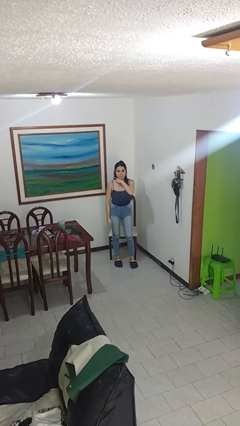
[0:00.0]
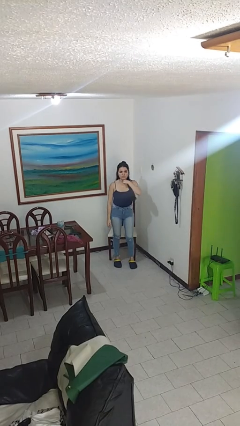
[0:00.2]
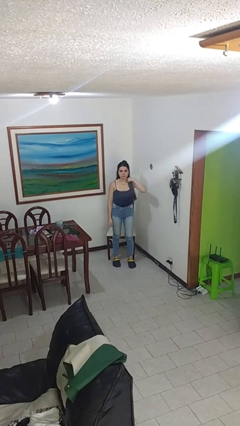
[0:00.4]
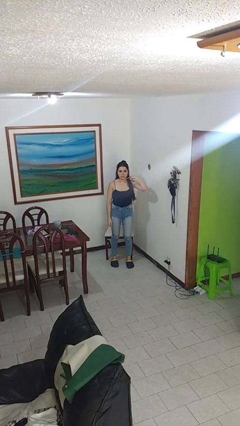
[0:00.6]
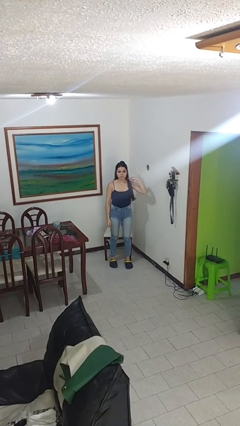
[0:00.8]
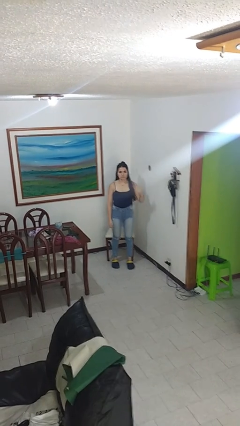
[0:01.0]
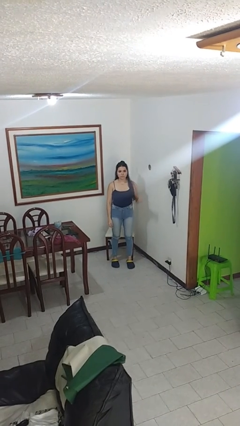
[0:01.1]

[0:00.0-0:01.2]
person gestures cut

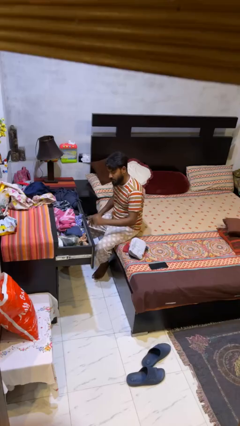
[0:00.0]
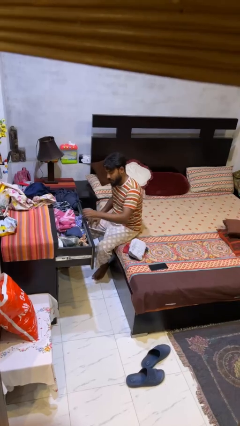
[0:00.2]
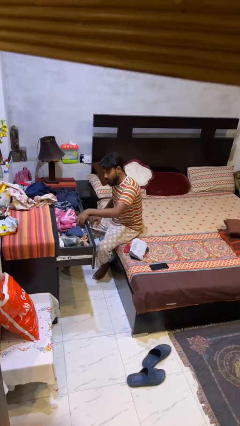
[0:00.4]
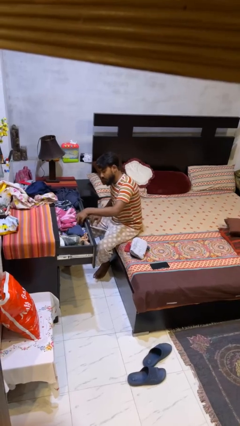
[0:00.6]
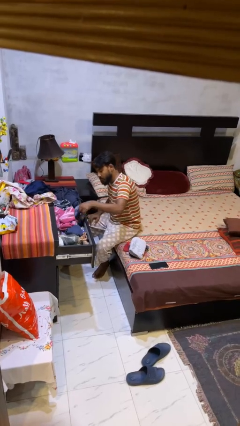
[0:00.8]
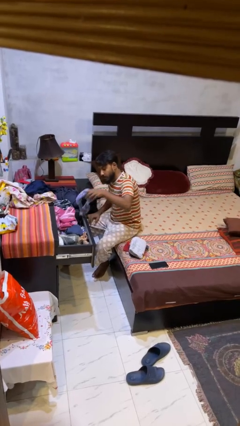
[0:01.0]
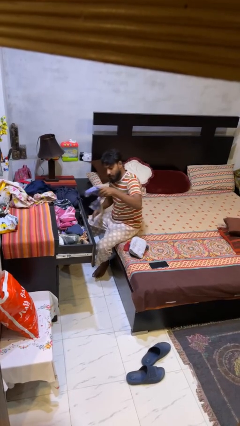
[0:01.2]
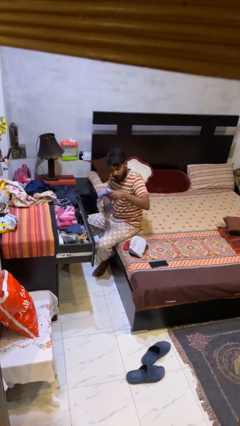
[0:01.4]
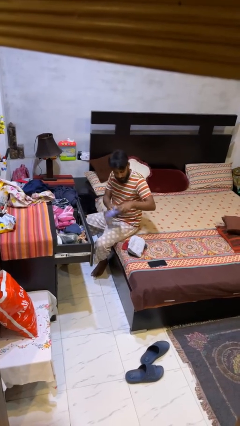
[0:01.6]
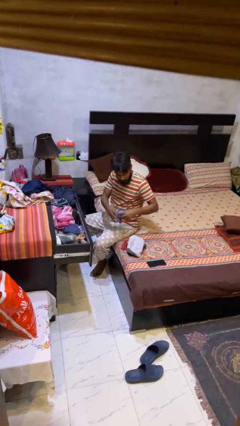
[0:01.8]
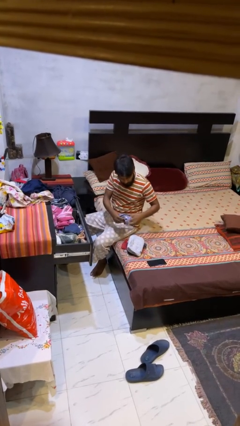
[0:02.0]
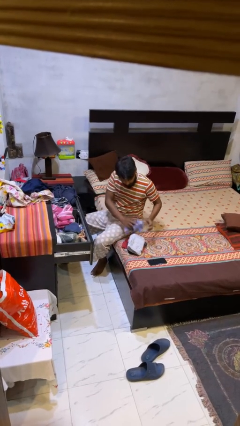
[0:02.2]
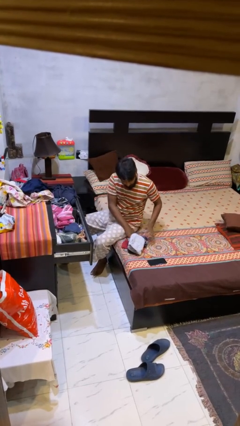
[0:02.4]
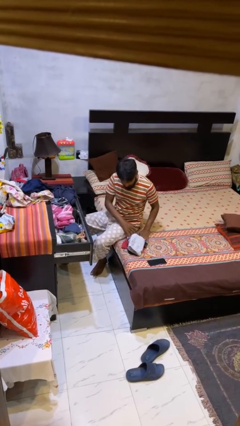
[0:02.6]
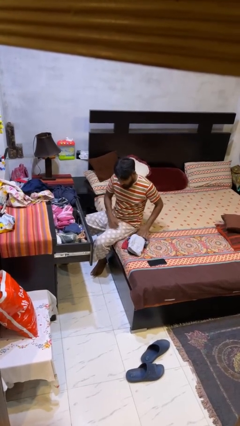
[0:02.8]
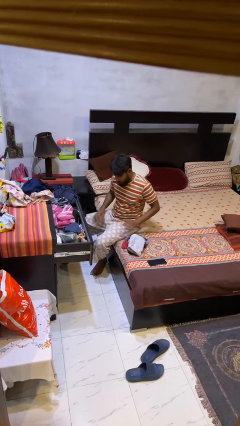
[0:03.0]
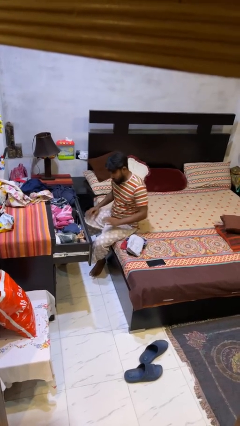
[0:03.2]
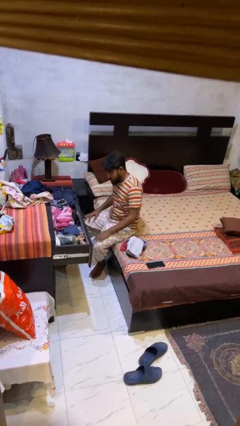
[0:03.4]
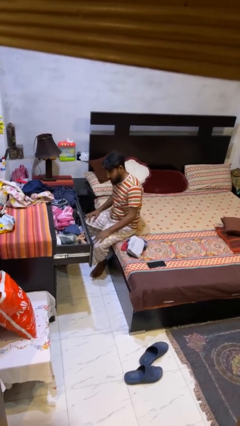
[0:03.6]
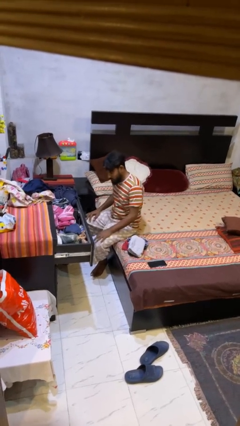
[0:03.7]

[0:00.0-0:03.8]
person takes clothes from dresser

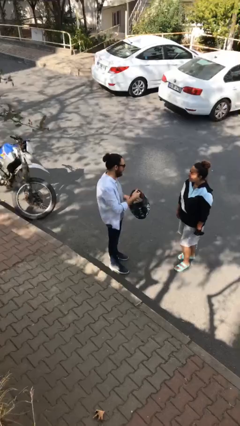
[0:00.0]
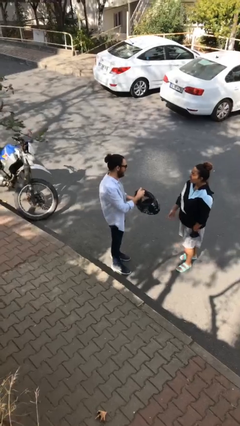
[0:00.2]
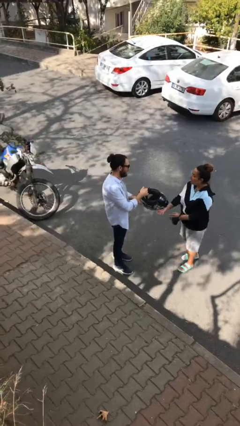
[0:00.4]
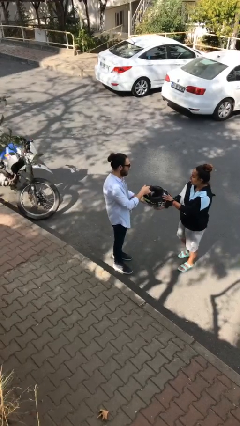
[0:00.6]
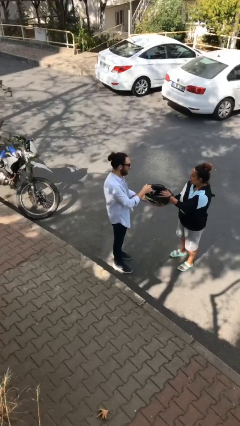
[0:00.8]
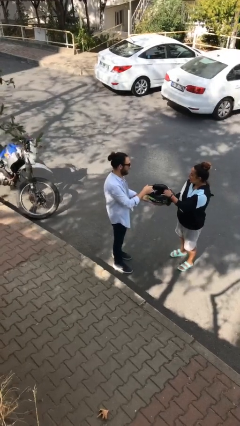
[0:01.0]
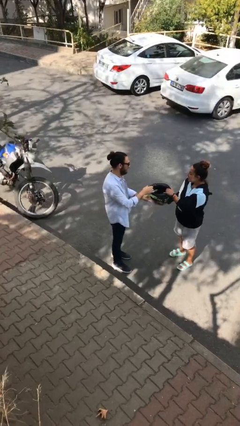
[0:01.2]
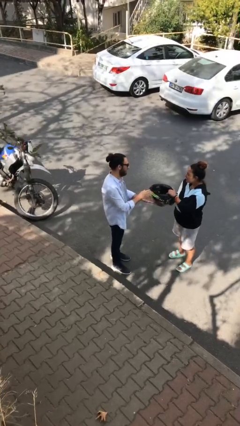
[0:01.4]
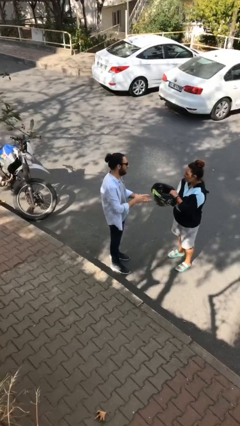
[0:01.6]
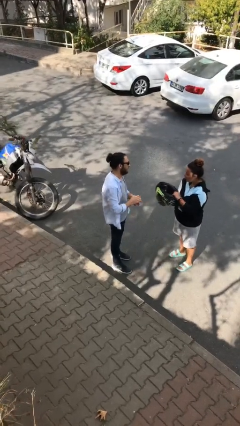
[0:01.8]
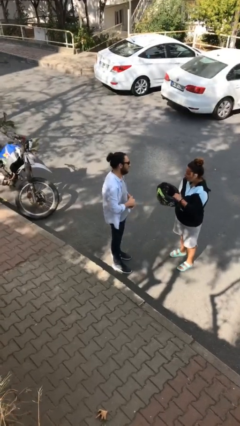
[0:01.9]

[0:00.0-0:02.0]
person transfers object to person

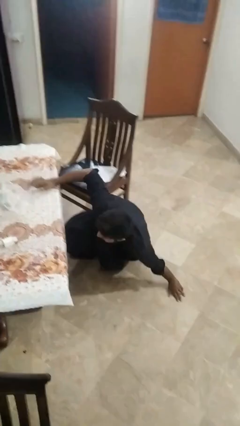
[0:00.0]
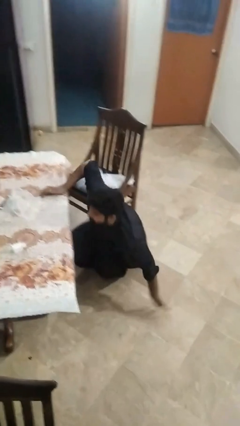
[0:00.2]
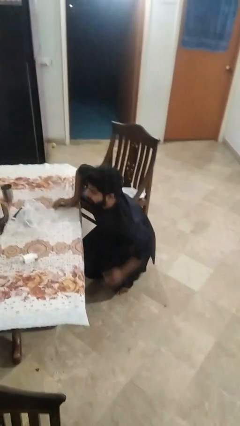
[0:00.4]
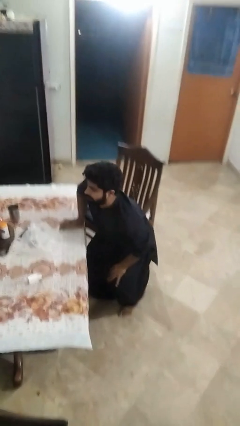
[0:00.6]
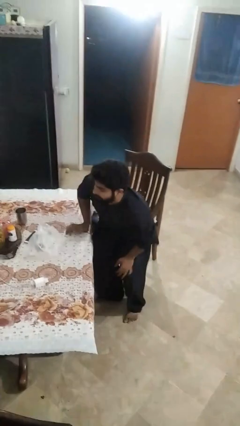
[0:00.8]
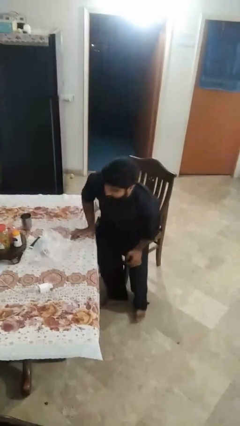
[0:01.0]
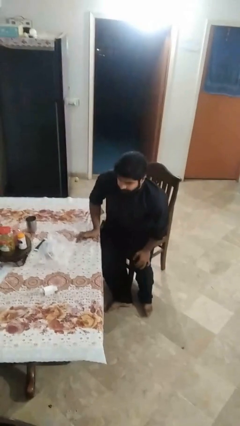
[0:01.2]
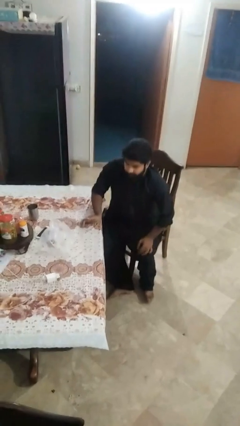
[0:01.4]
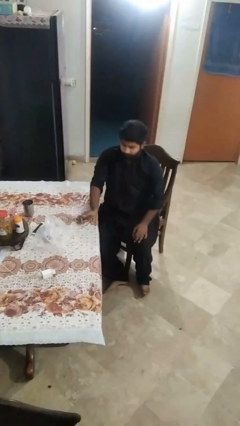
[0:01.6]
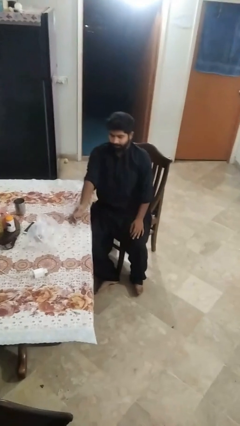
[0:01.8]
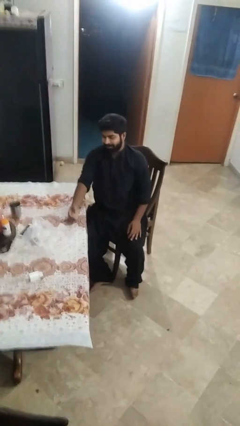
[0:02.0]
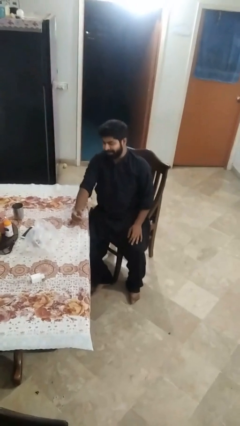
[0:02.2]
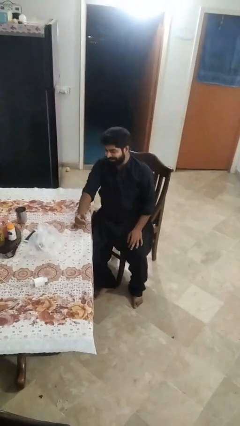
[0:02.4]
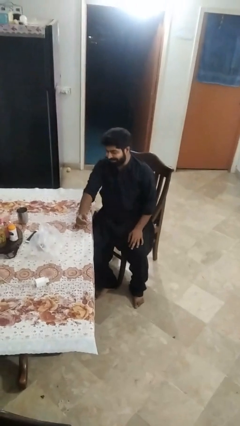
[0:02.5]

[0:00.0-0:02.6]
person stands up from floor

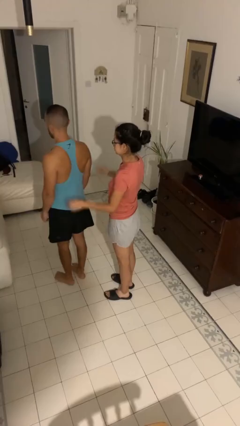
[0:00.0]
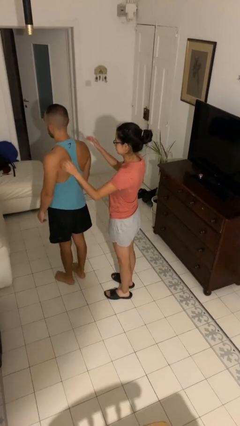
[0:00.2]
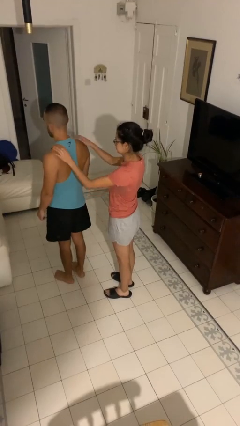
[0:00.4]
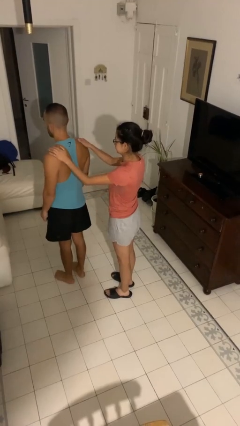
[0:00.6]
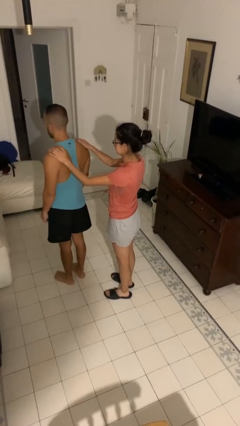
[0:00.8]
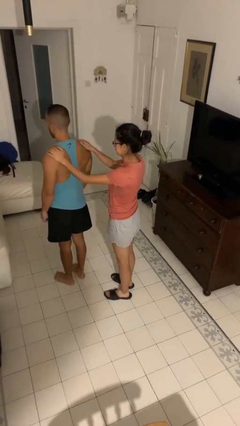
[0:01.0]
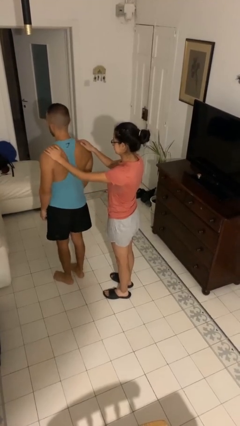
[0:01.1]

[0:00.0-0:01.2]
person grabs person by shoulder

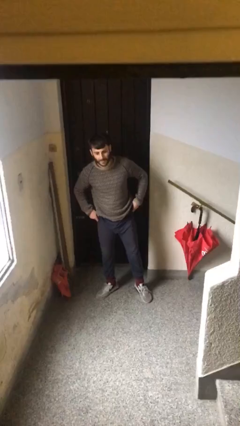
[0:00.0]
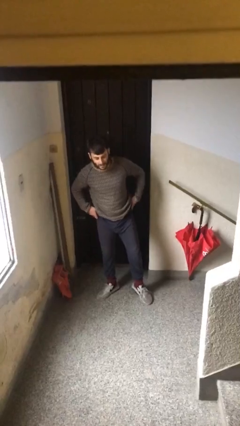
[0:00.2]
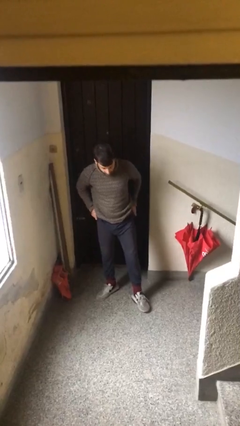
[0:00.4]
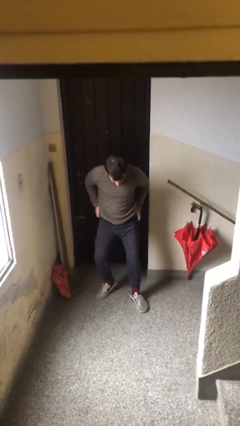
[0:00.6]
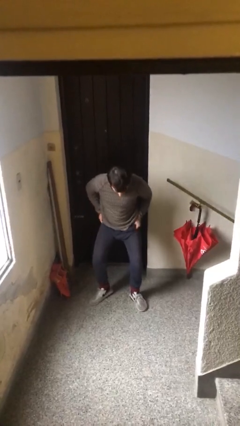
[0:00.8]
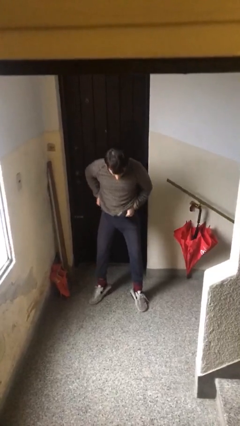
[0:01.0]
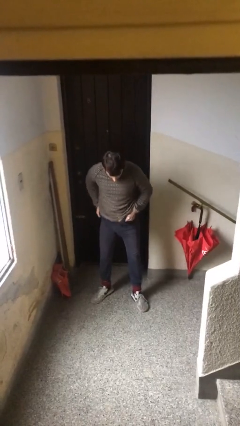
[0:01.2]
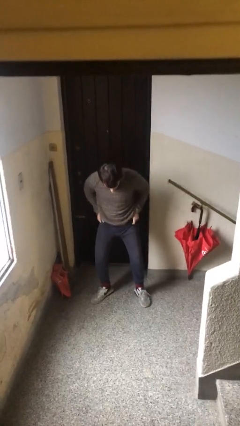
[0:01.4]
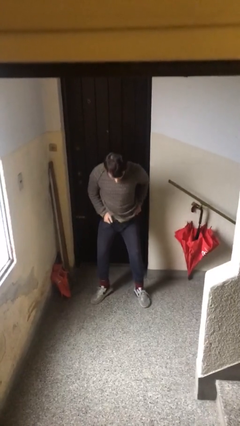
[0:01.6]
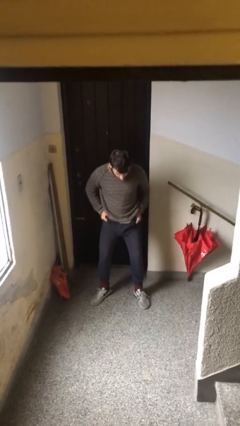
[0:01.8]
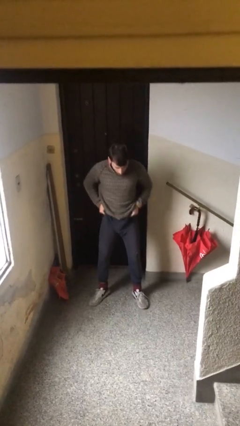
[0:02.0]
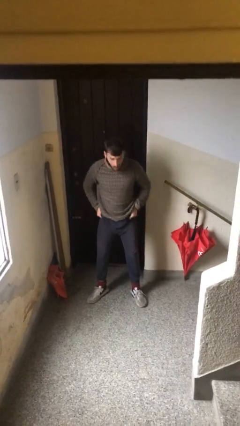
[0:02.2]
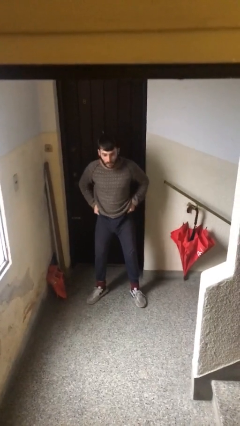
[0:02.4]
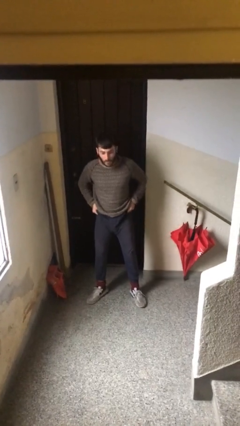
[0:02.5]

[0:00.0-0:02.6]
person hikes up pants

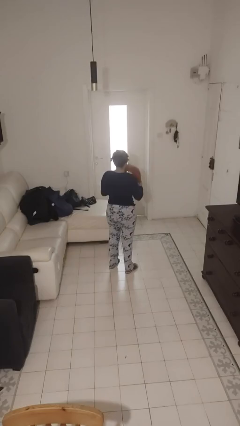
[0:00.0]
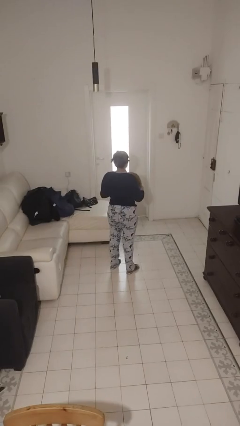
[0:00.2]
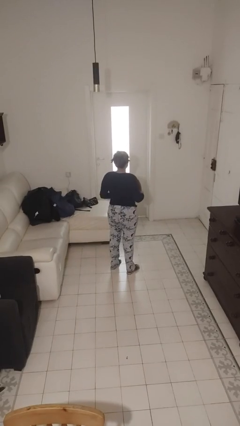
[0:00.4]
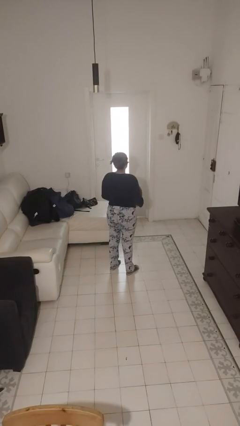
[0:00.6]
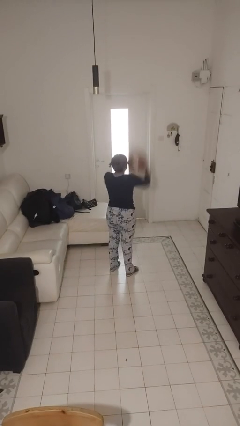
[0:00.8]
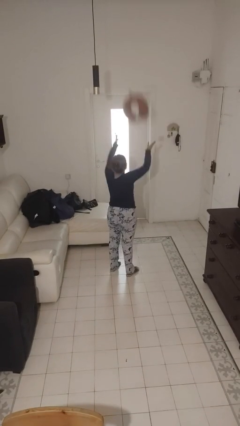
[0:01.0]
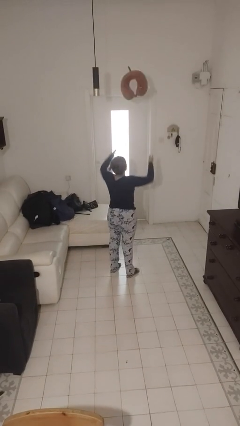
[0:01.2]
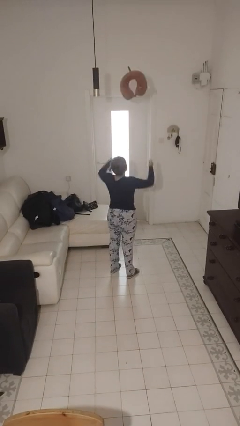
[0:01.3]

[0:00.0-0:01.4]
person drops object

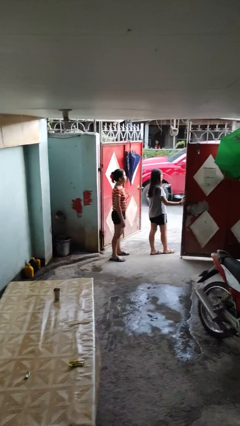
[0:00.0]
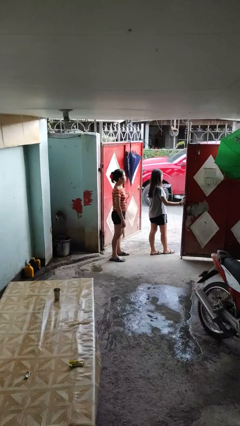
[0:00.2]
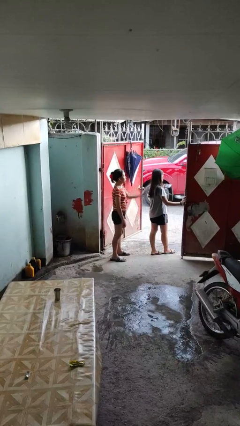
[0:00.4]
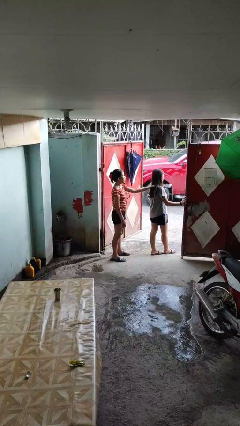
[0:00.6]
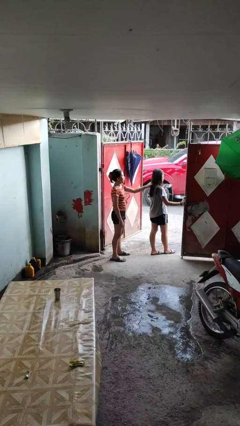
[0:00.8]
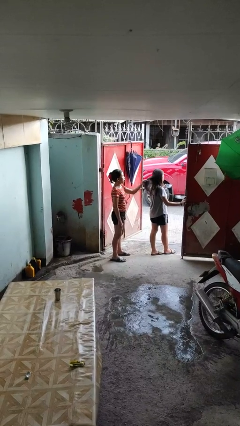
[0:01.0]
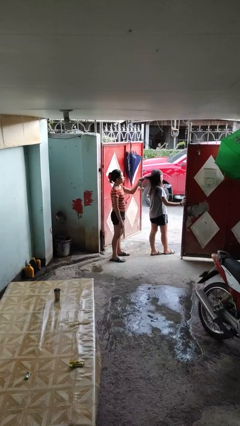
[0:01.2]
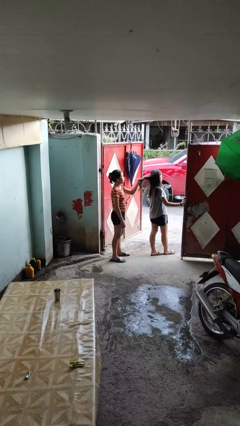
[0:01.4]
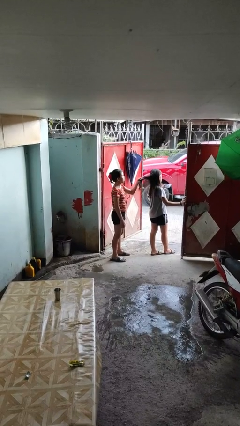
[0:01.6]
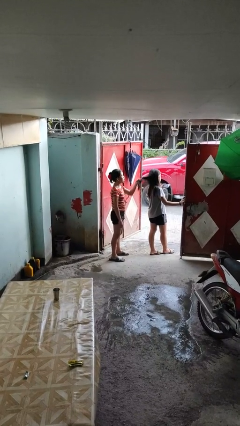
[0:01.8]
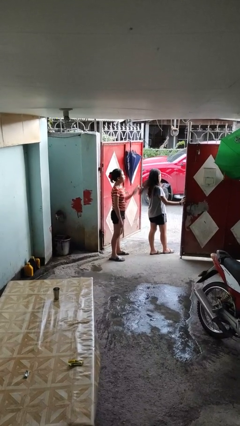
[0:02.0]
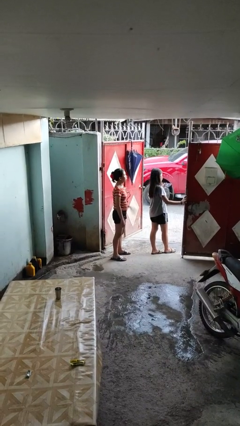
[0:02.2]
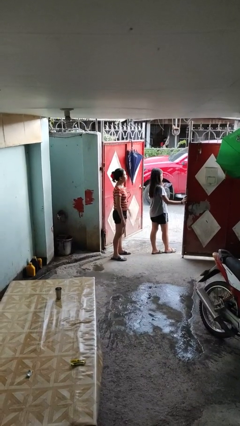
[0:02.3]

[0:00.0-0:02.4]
person grabs person by hair
